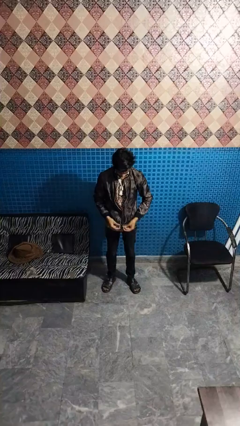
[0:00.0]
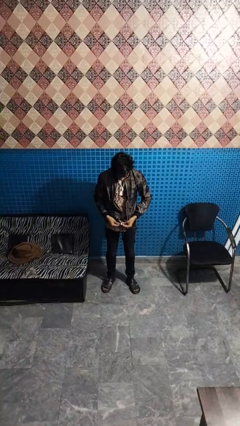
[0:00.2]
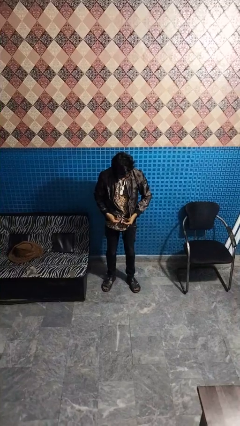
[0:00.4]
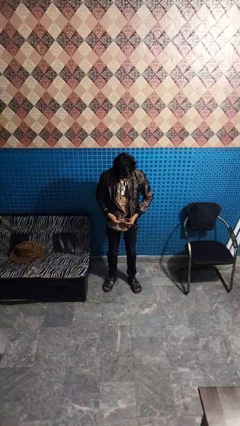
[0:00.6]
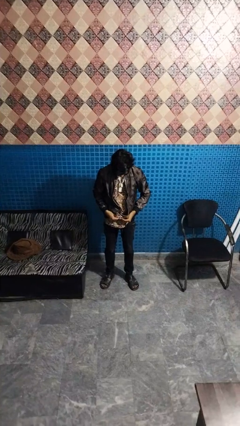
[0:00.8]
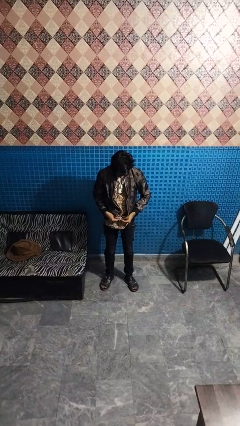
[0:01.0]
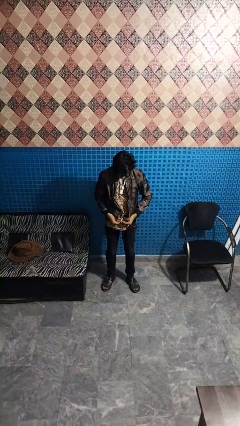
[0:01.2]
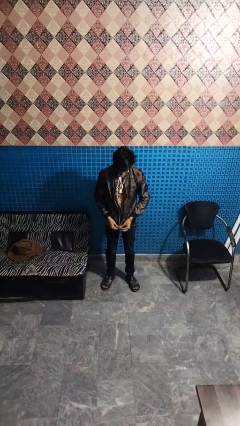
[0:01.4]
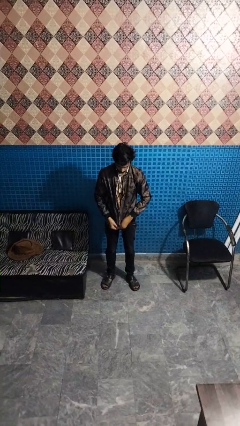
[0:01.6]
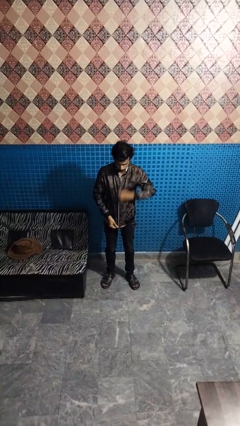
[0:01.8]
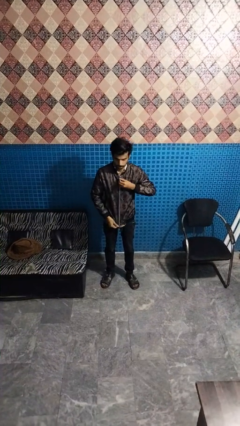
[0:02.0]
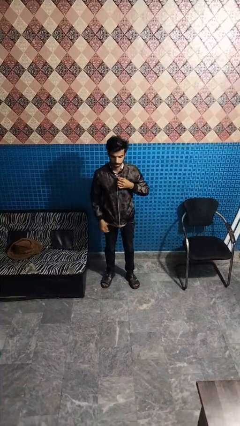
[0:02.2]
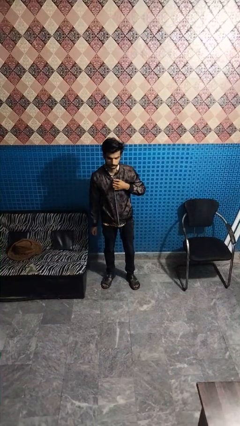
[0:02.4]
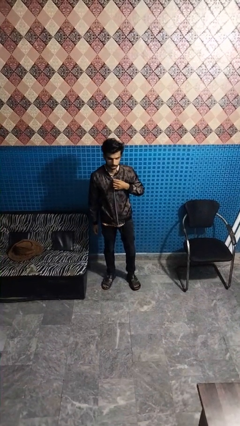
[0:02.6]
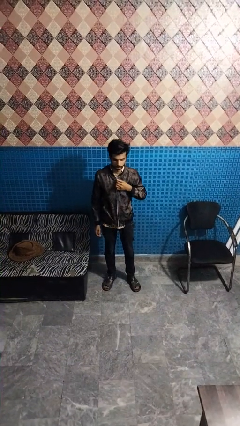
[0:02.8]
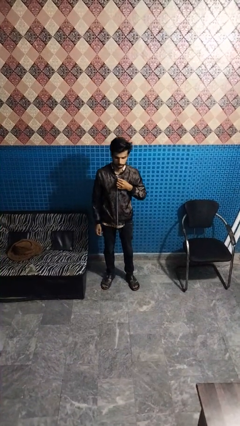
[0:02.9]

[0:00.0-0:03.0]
person zips up jacket

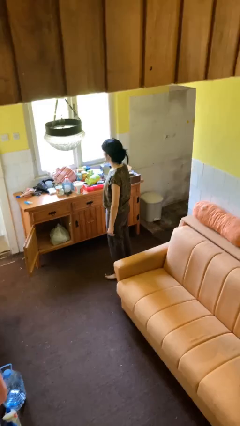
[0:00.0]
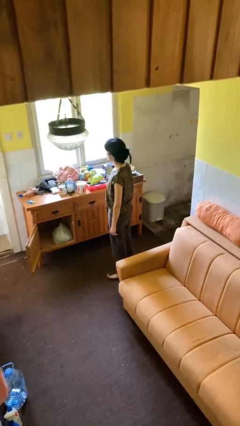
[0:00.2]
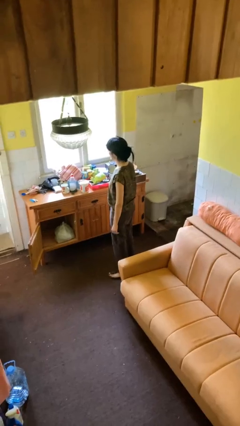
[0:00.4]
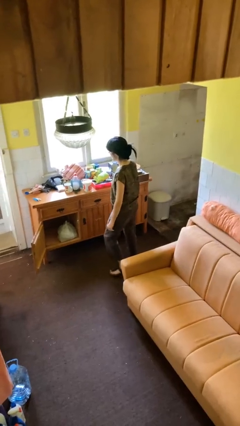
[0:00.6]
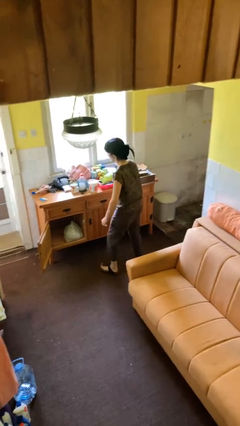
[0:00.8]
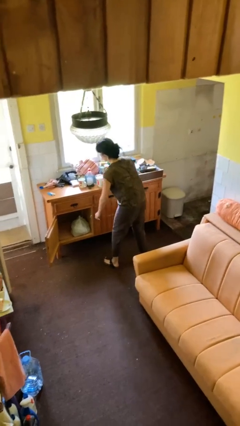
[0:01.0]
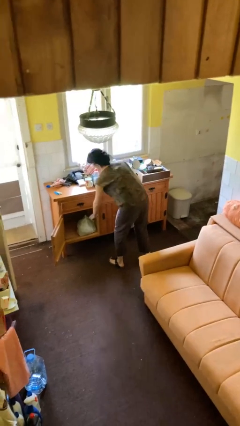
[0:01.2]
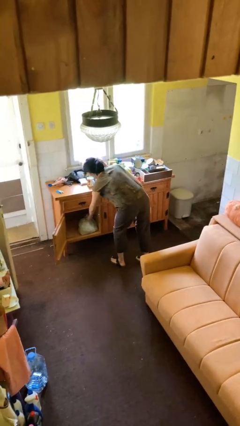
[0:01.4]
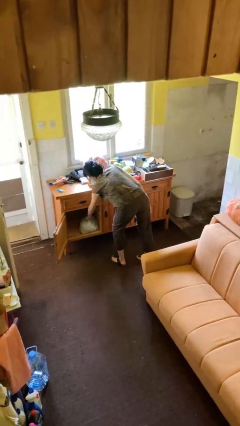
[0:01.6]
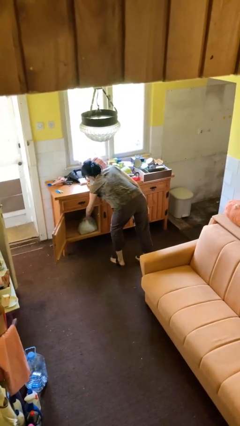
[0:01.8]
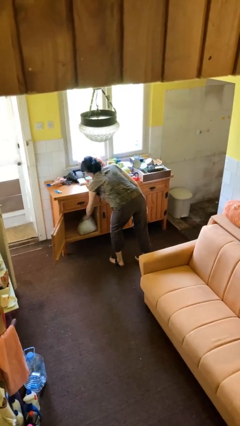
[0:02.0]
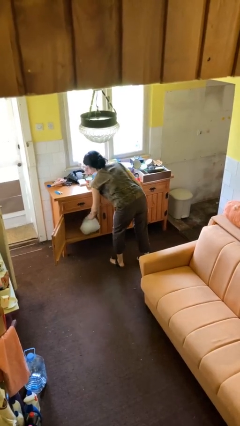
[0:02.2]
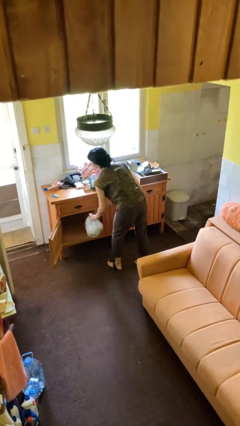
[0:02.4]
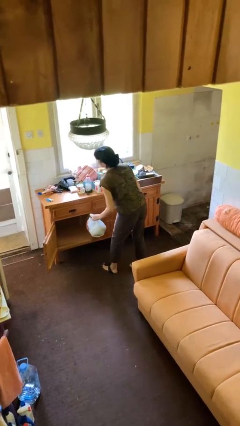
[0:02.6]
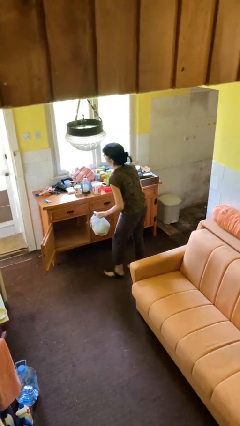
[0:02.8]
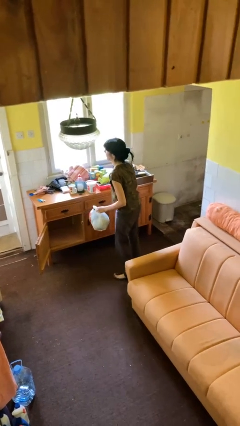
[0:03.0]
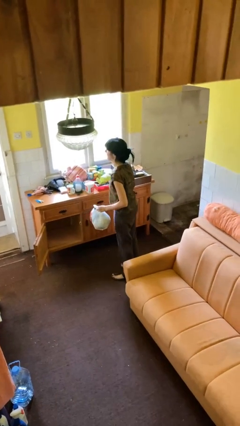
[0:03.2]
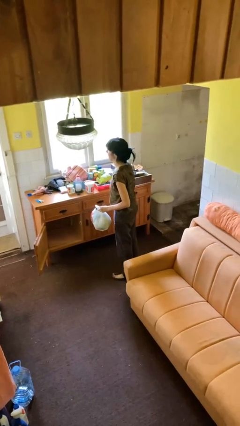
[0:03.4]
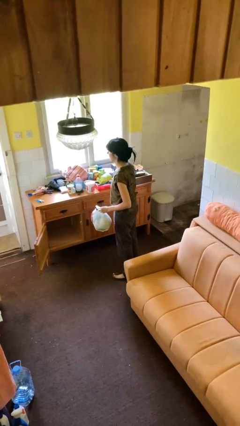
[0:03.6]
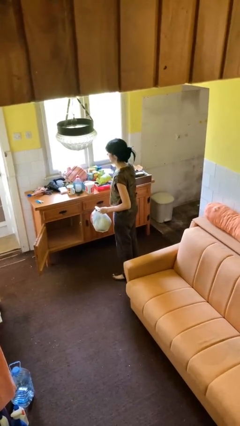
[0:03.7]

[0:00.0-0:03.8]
person picks up object from cabinet

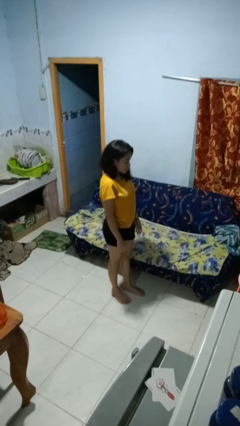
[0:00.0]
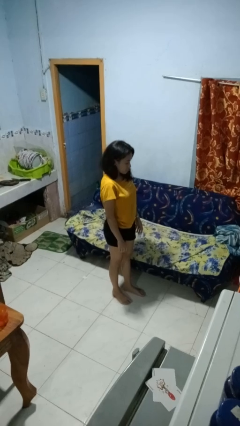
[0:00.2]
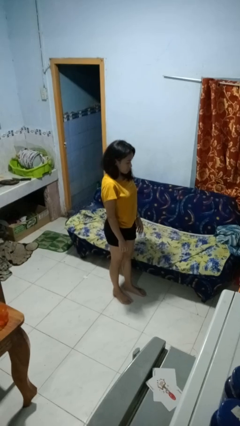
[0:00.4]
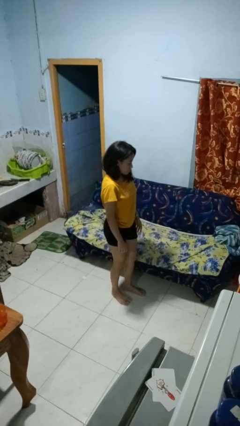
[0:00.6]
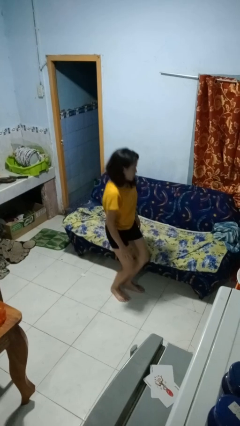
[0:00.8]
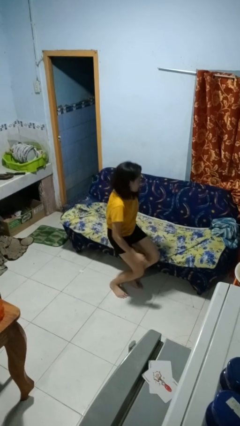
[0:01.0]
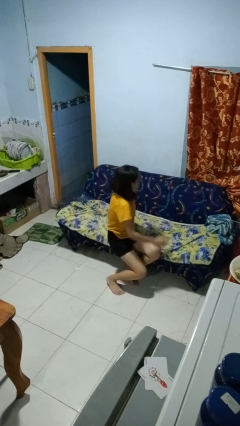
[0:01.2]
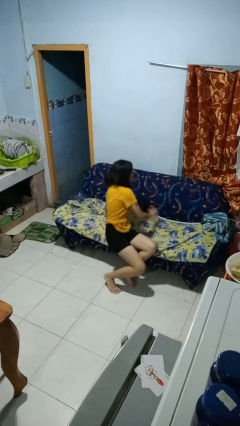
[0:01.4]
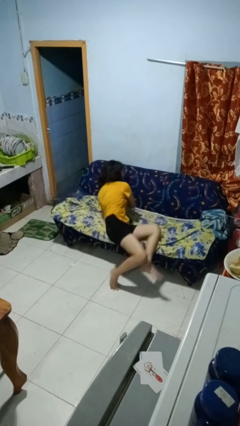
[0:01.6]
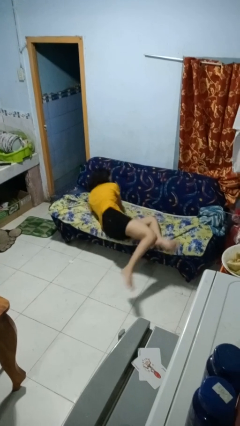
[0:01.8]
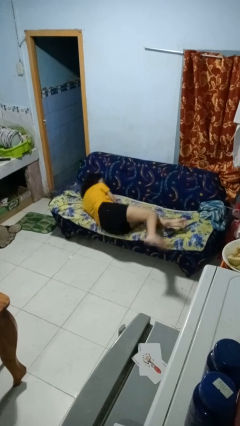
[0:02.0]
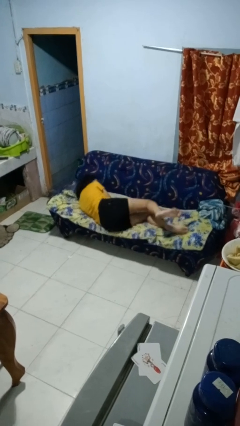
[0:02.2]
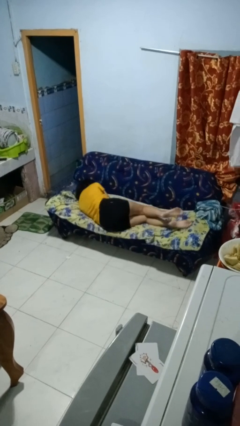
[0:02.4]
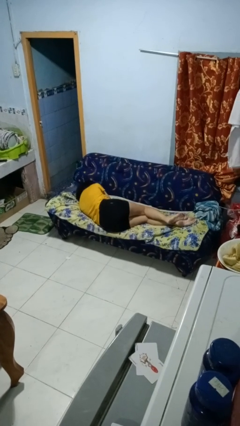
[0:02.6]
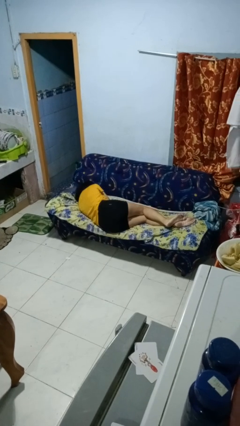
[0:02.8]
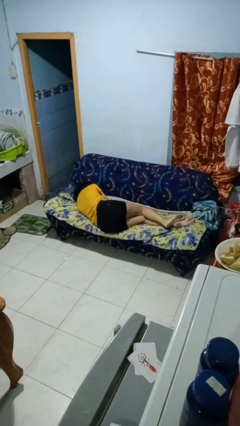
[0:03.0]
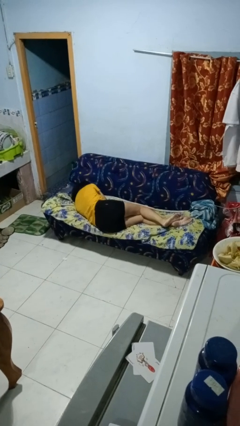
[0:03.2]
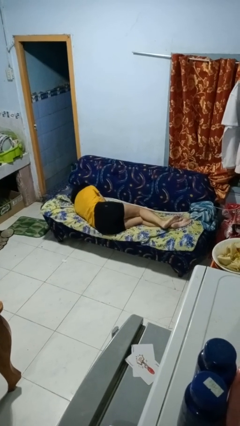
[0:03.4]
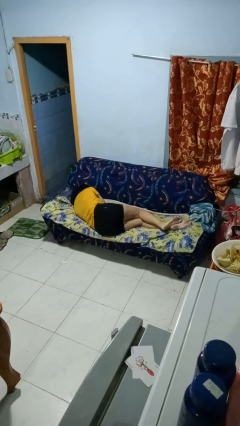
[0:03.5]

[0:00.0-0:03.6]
person lies down on couch

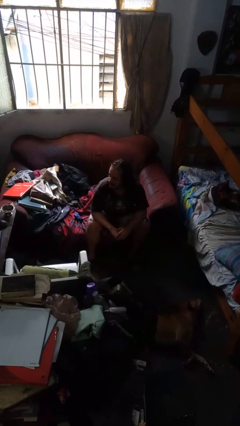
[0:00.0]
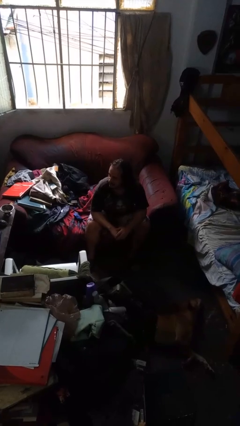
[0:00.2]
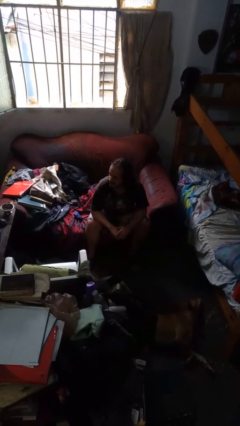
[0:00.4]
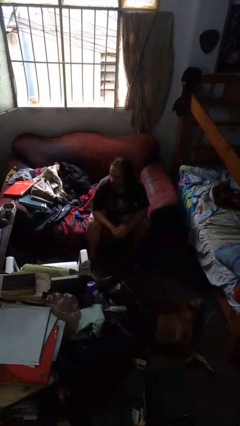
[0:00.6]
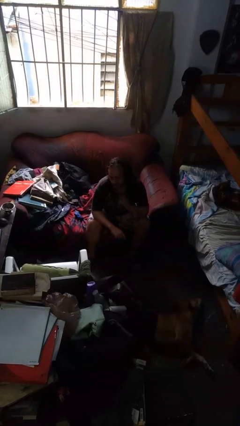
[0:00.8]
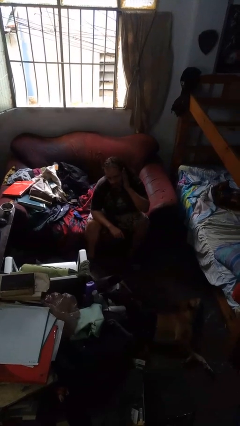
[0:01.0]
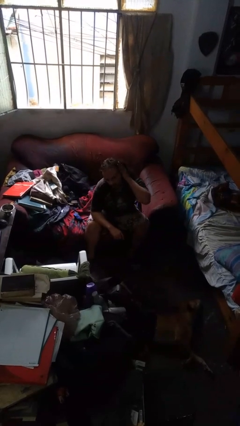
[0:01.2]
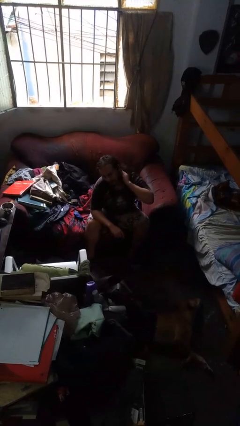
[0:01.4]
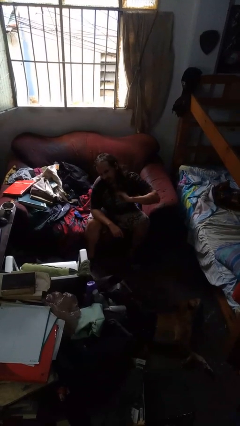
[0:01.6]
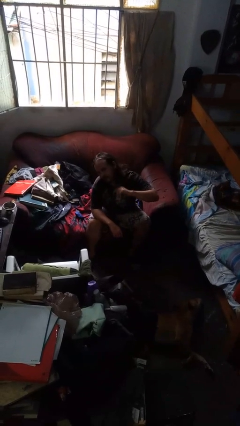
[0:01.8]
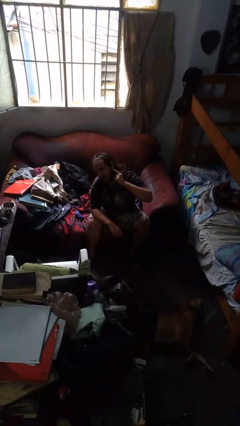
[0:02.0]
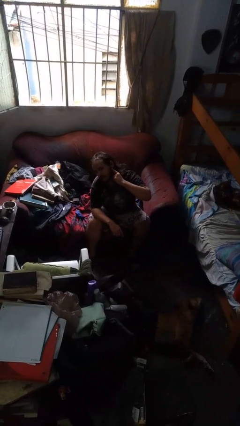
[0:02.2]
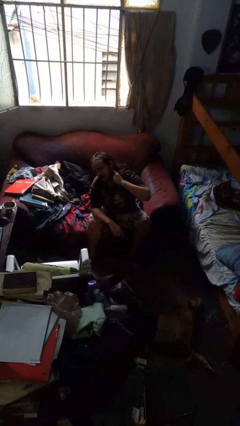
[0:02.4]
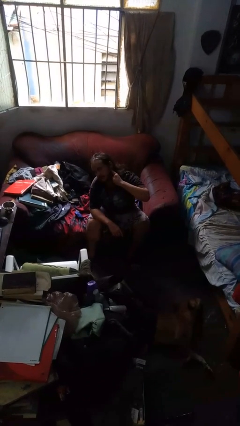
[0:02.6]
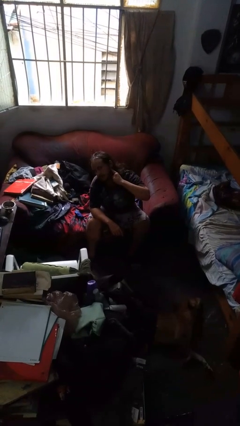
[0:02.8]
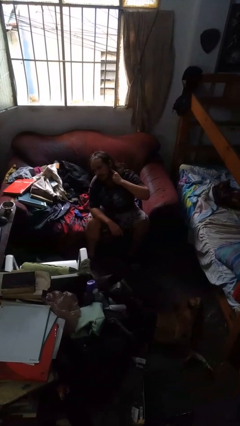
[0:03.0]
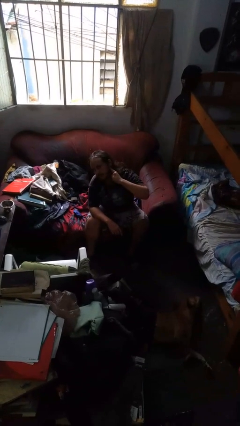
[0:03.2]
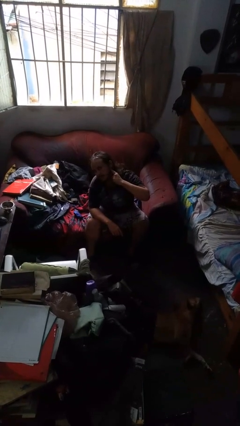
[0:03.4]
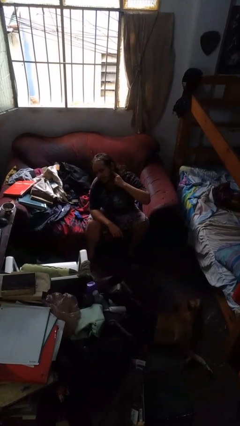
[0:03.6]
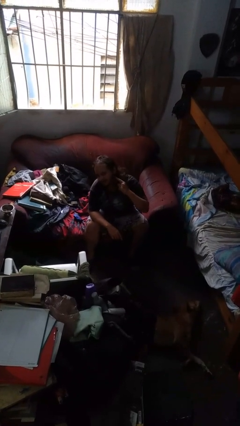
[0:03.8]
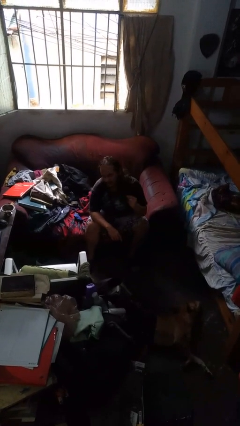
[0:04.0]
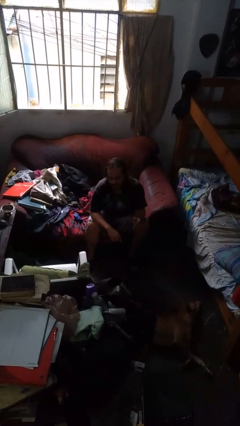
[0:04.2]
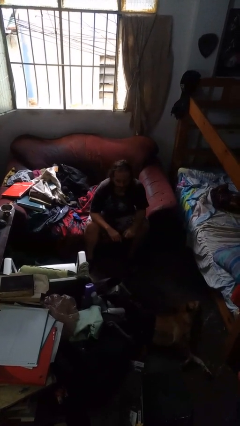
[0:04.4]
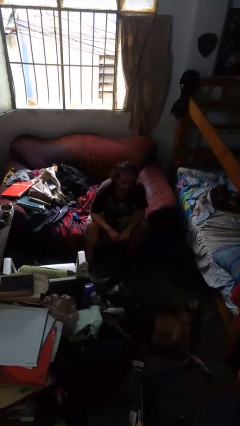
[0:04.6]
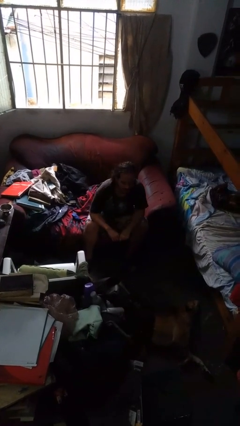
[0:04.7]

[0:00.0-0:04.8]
person gestures listen closely

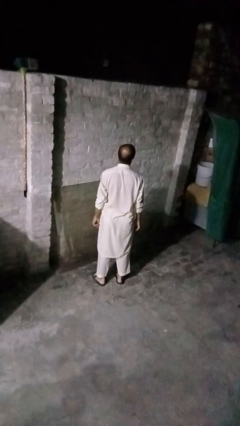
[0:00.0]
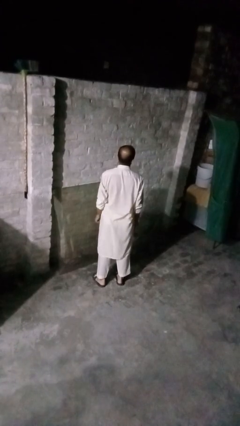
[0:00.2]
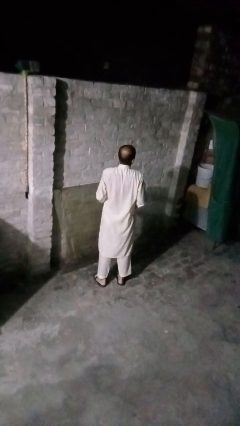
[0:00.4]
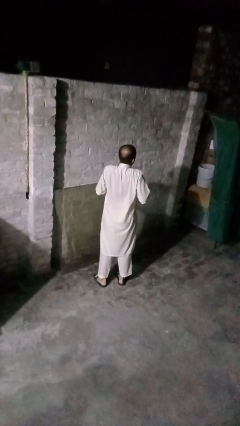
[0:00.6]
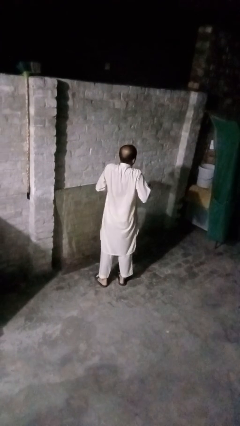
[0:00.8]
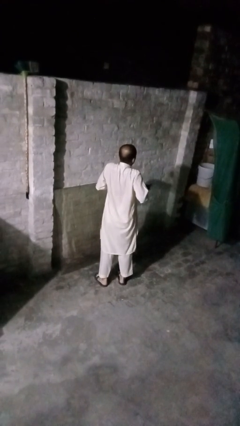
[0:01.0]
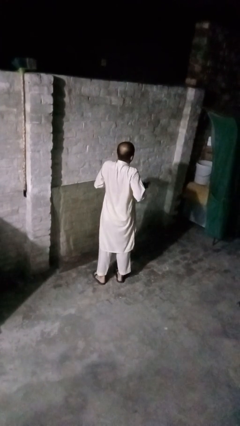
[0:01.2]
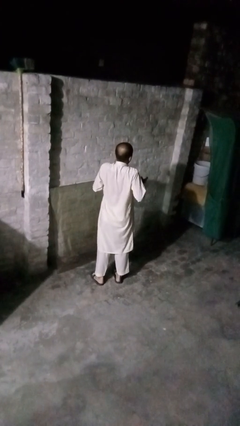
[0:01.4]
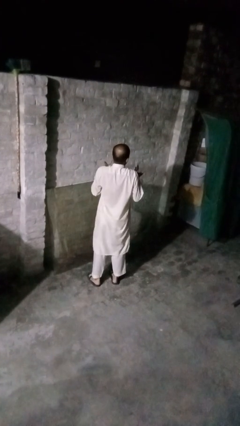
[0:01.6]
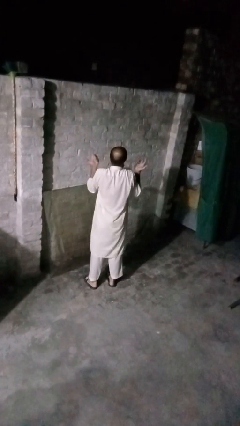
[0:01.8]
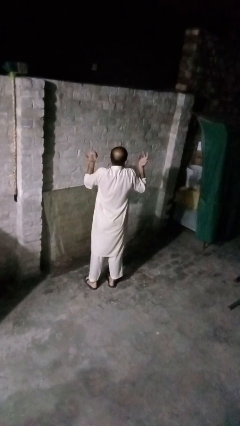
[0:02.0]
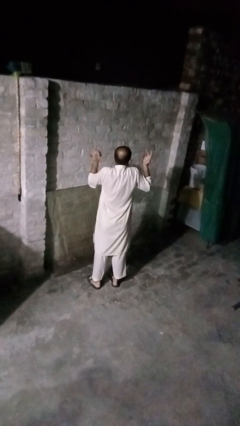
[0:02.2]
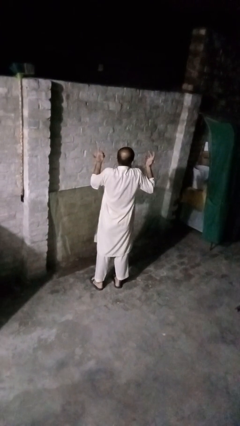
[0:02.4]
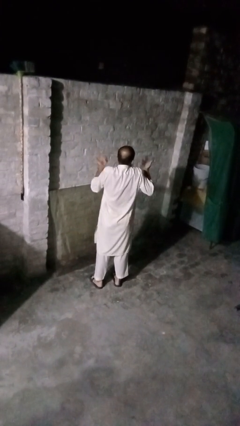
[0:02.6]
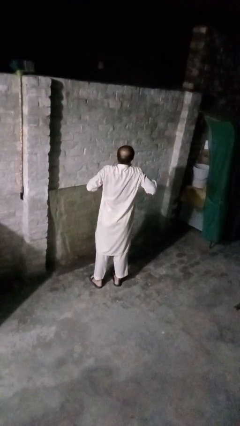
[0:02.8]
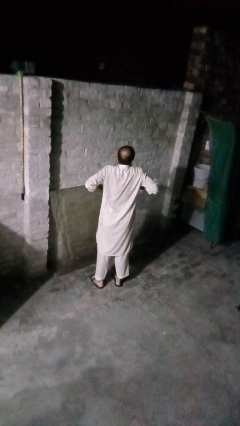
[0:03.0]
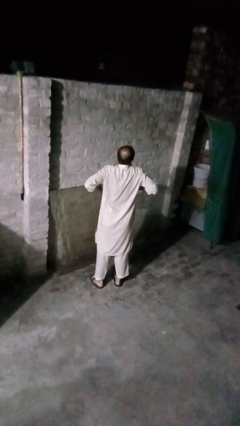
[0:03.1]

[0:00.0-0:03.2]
person shrugs
